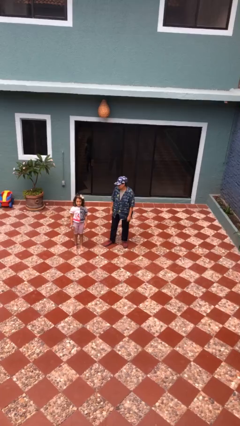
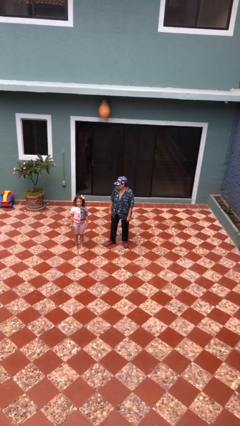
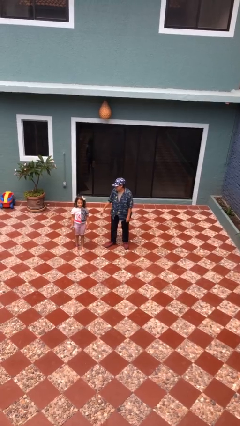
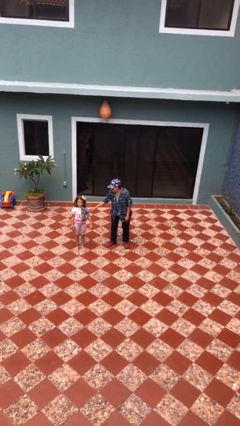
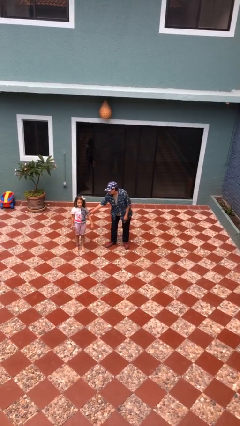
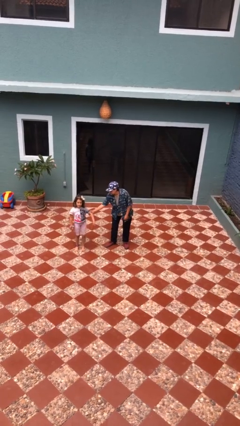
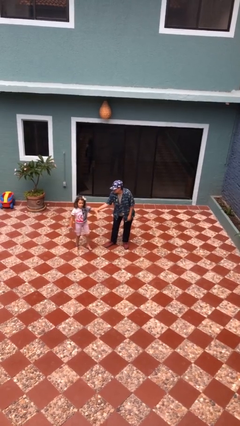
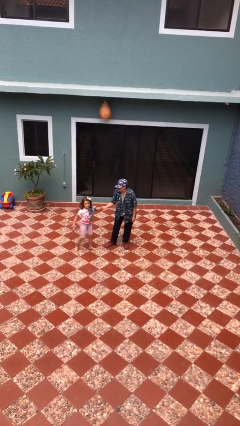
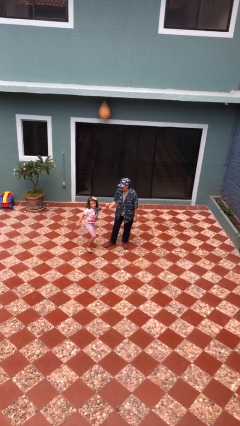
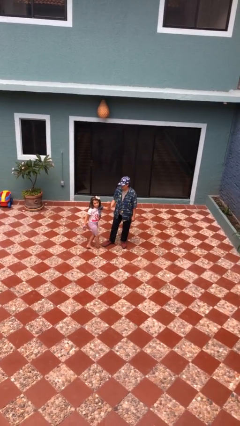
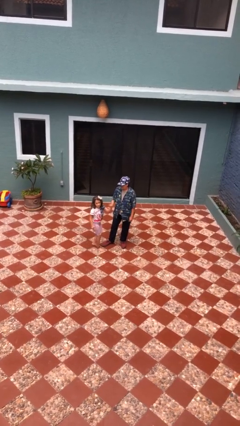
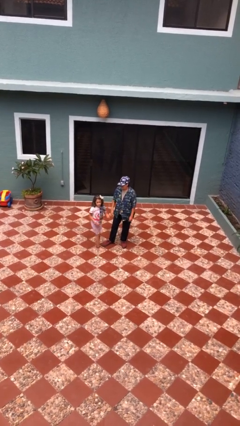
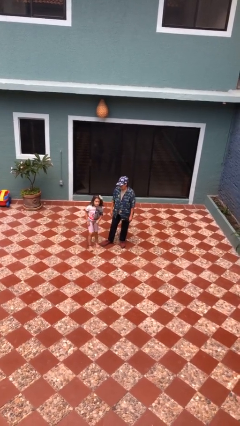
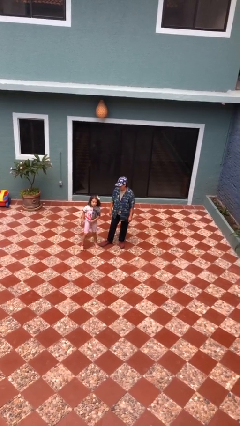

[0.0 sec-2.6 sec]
person grabs person by bicep

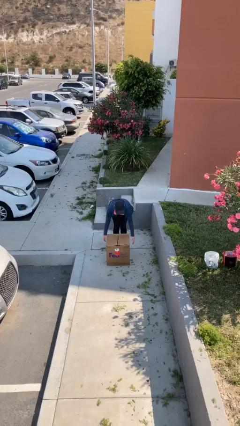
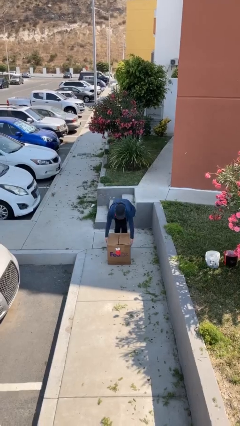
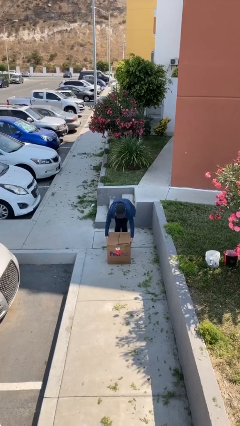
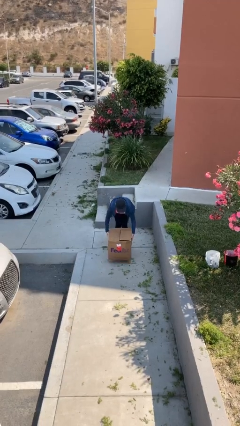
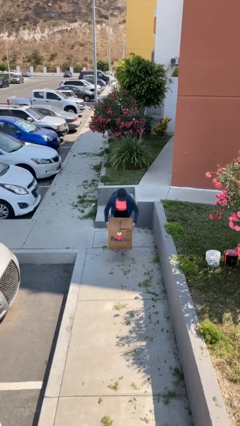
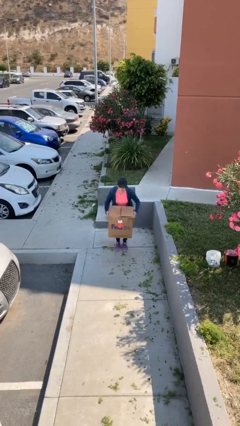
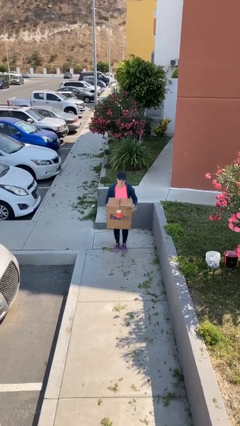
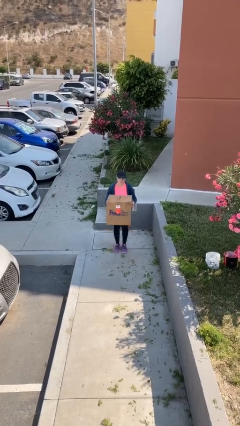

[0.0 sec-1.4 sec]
person picks up object from floor

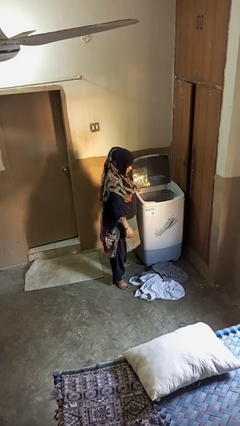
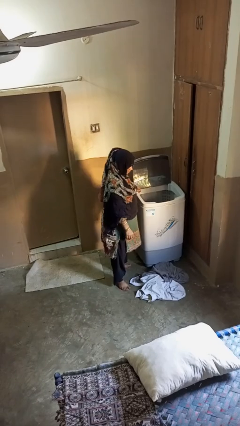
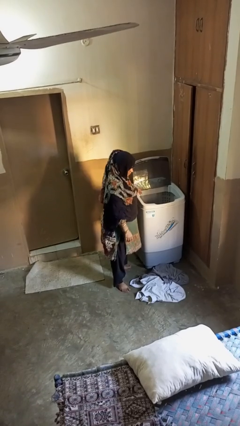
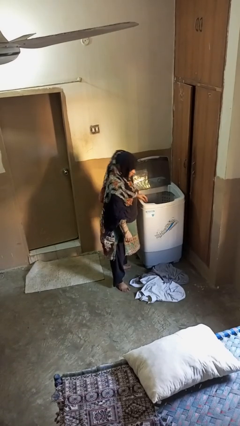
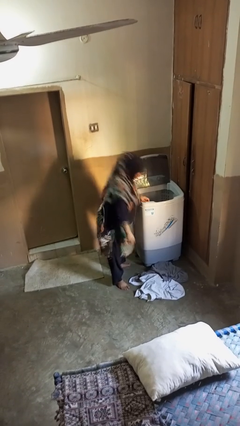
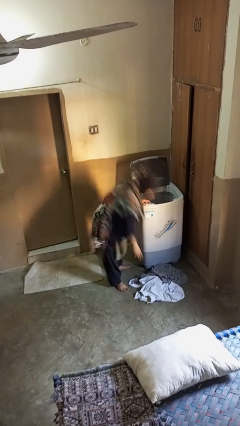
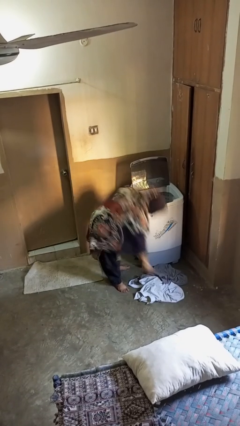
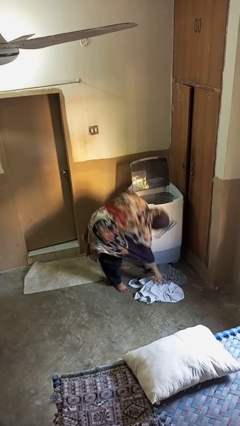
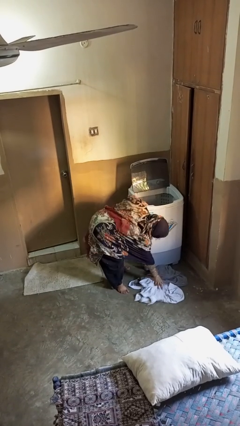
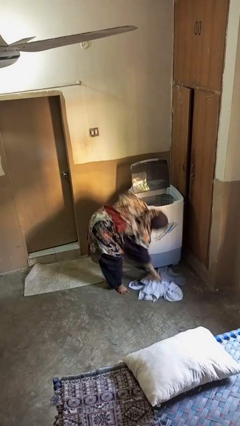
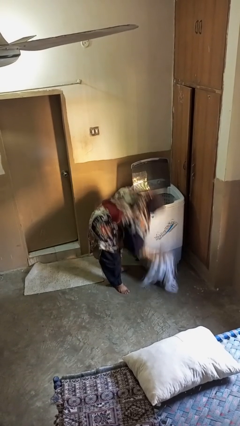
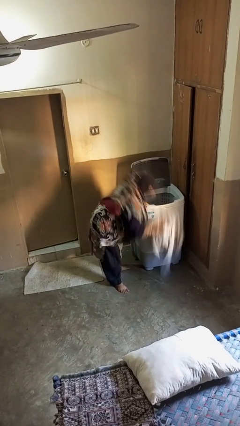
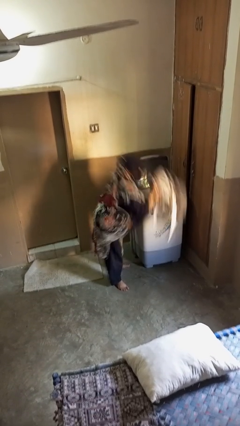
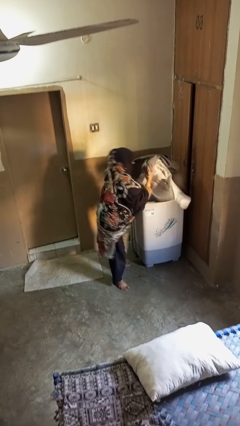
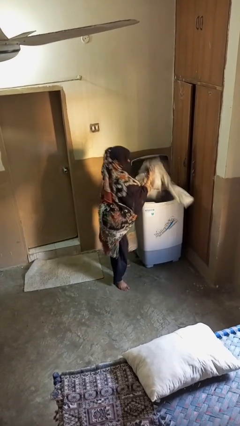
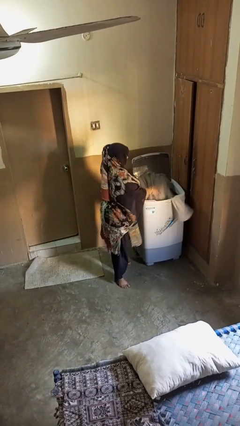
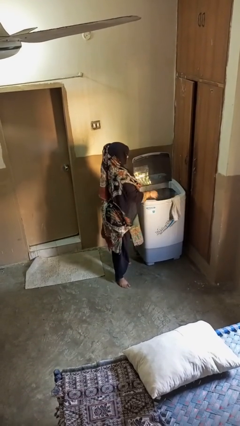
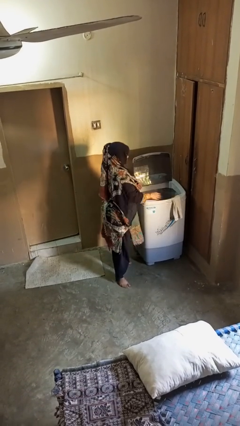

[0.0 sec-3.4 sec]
person loads clotheswasher

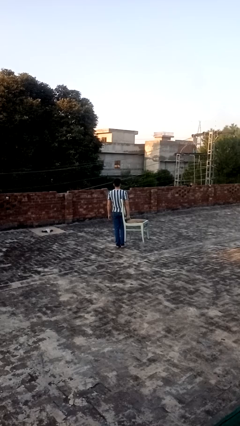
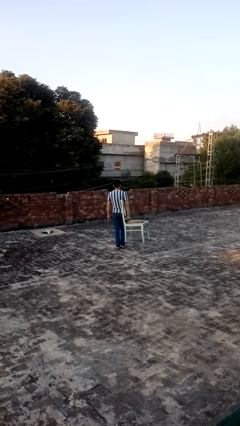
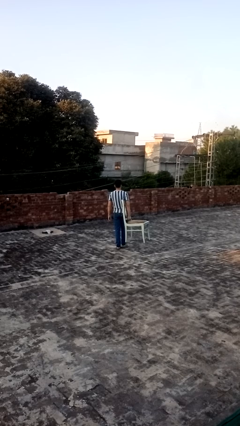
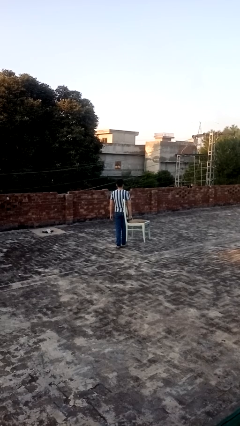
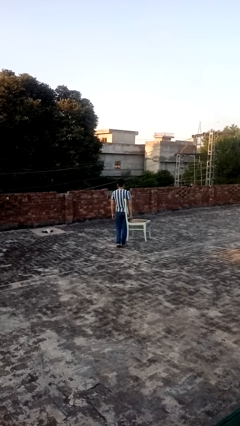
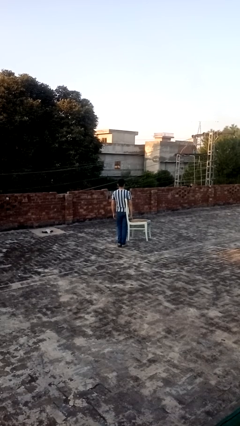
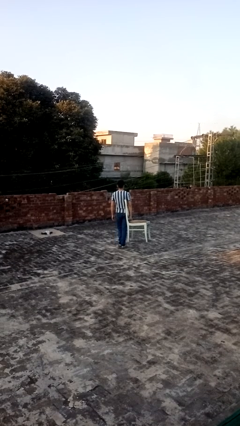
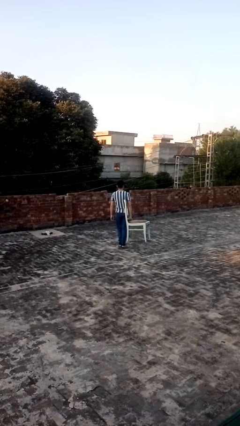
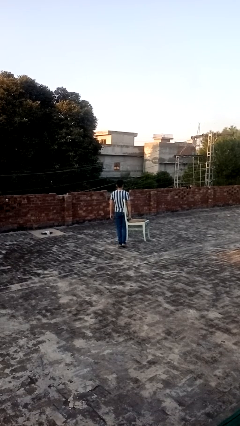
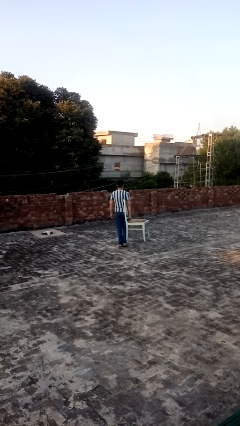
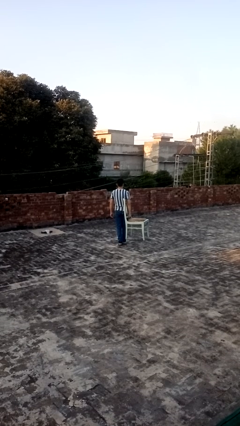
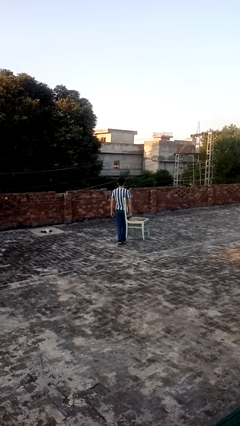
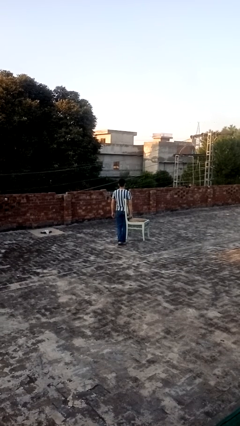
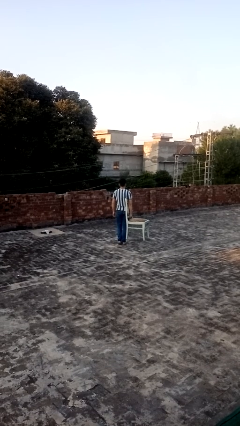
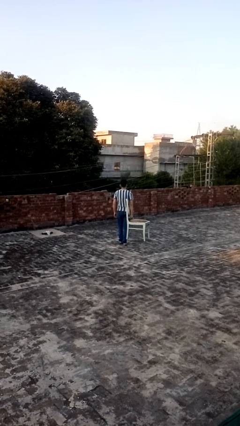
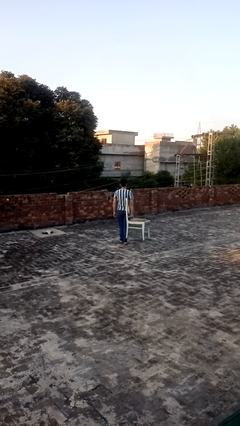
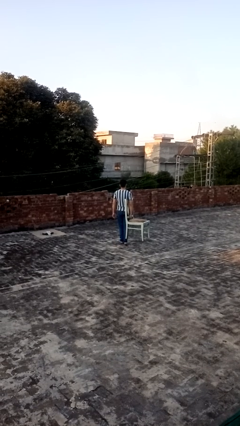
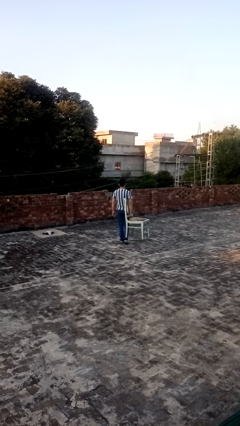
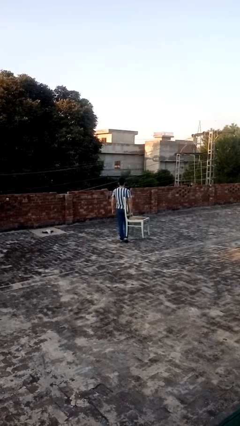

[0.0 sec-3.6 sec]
person carries furniture

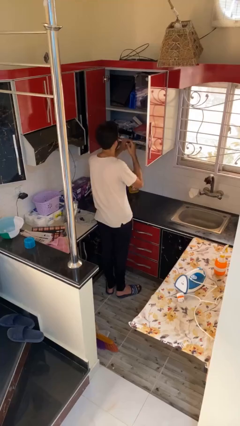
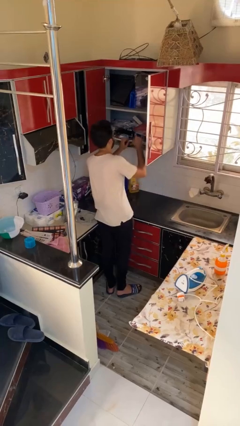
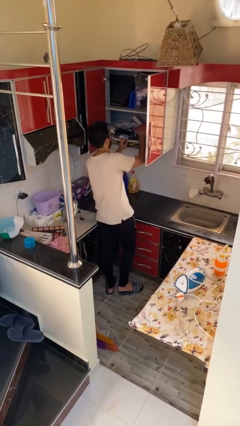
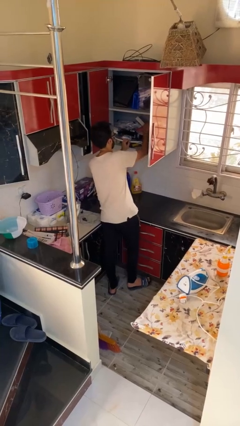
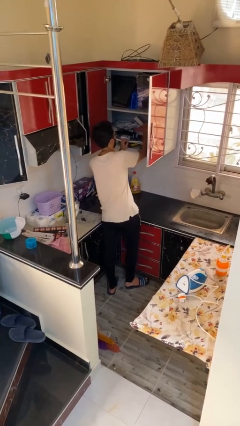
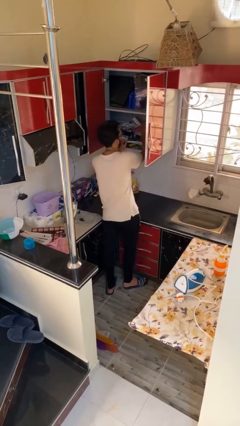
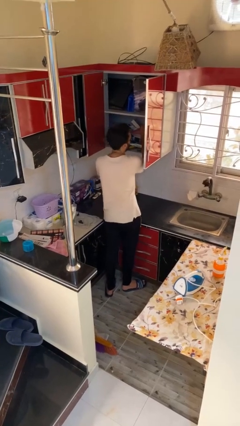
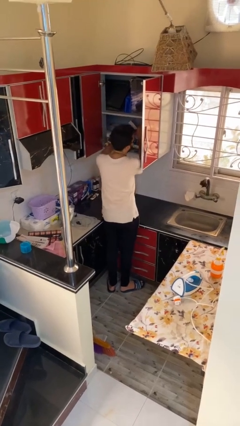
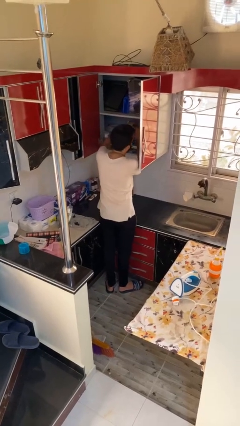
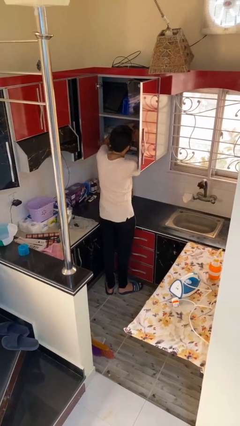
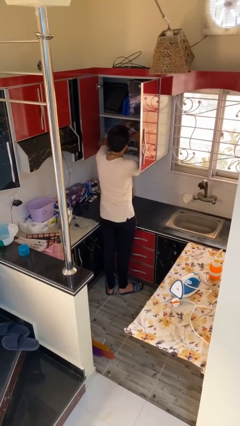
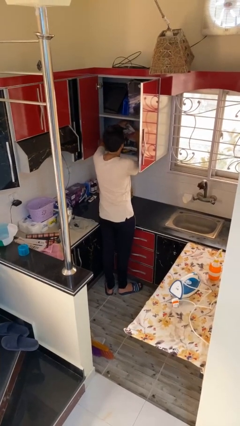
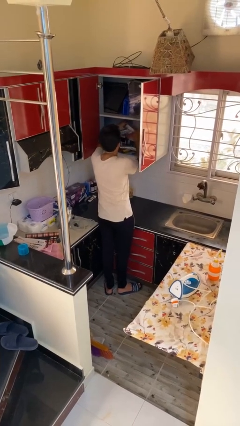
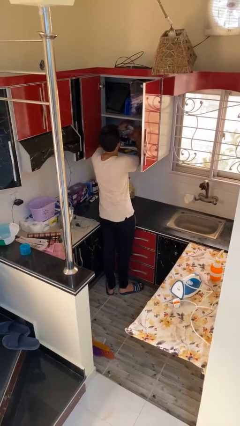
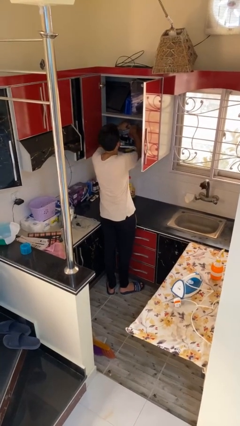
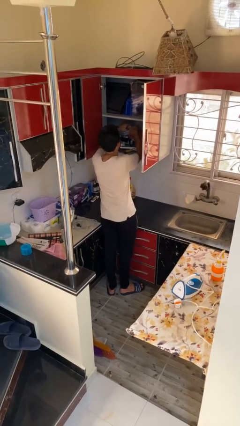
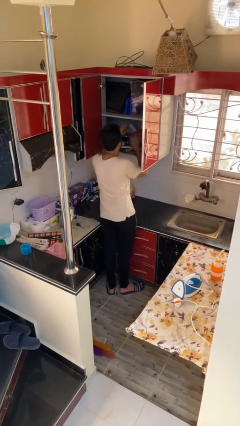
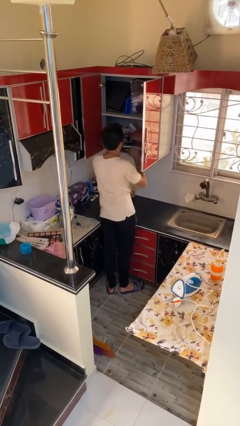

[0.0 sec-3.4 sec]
person searches in cabinet

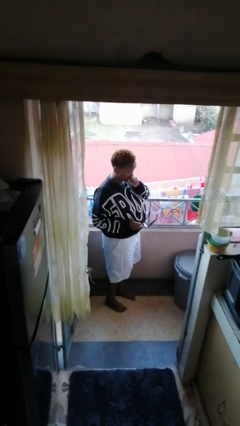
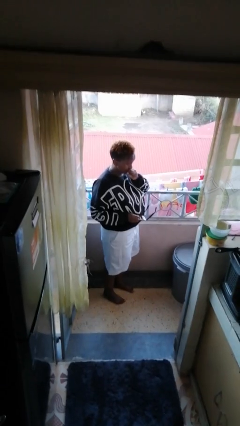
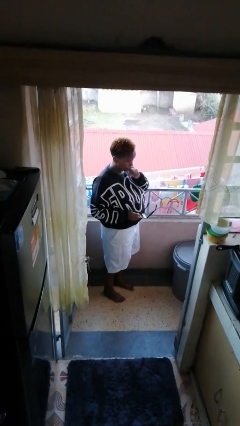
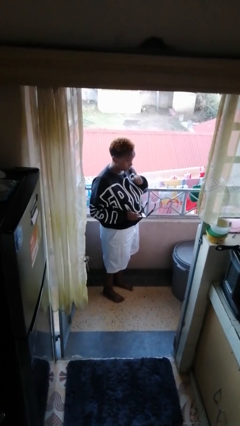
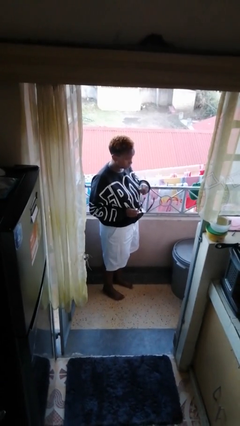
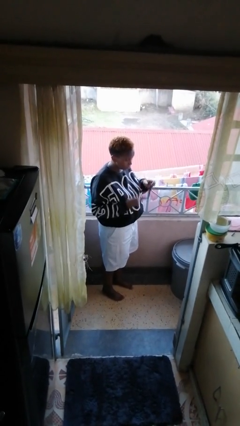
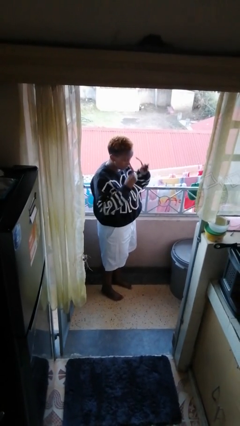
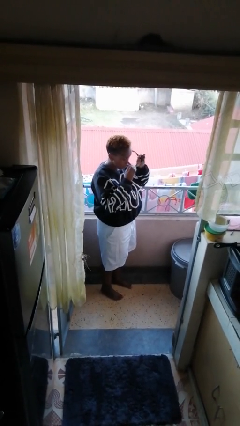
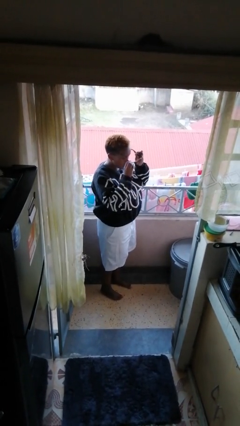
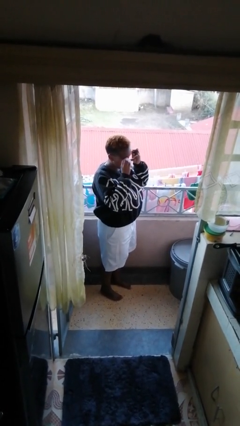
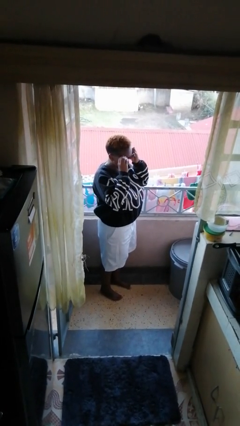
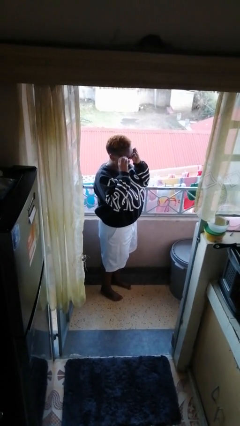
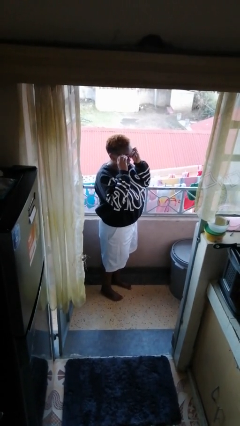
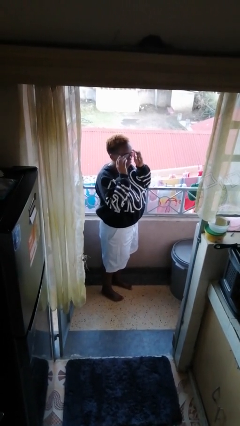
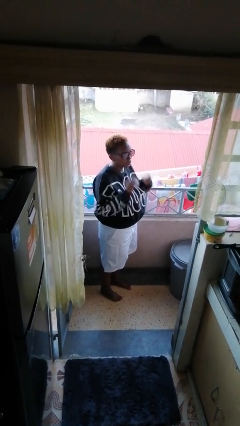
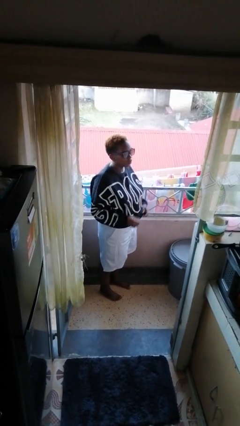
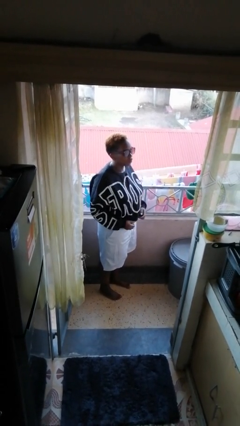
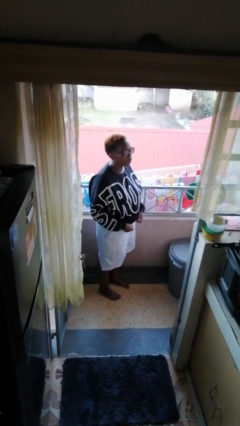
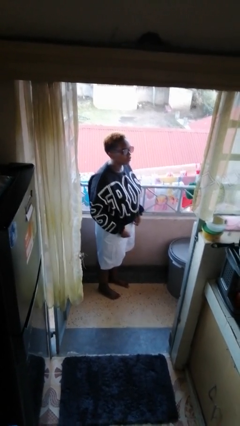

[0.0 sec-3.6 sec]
person puts on sunglasses
